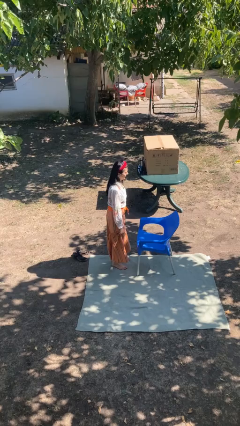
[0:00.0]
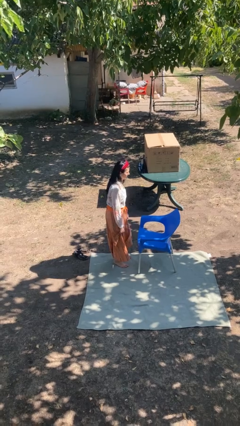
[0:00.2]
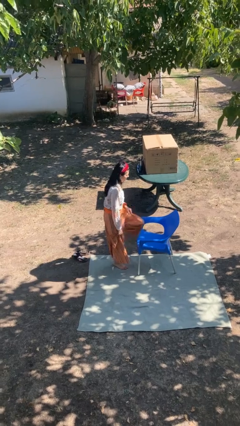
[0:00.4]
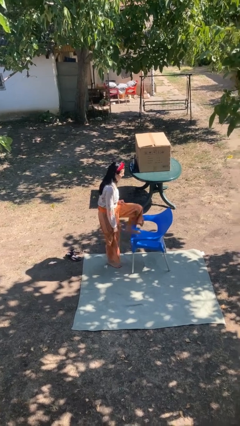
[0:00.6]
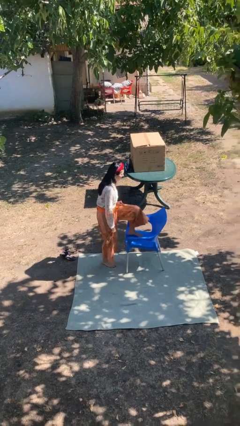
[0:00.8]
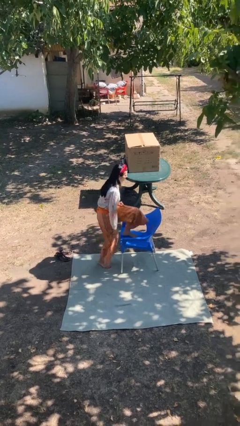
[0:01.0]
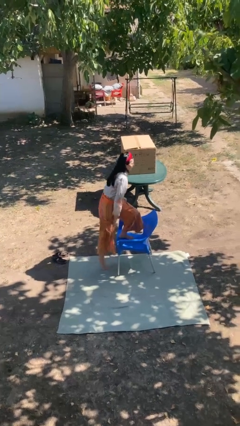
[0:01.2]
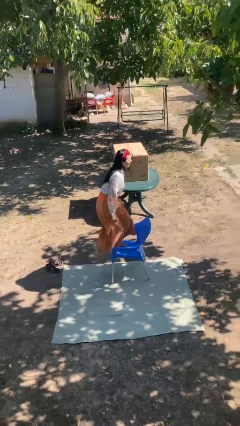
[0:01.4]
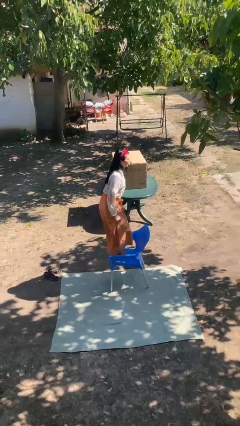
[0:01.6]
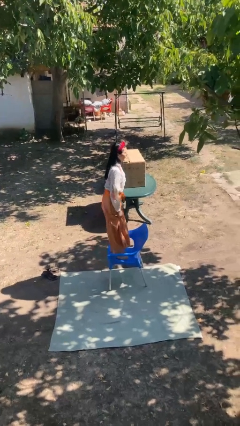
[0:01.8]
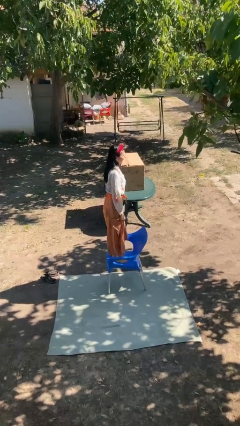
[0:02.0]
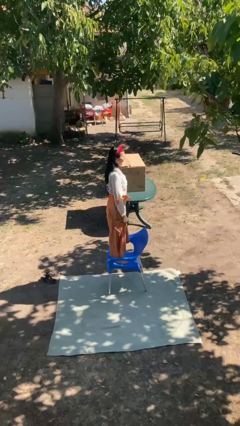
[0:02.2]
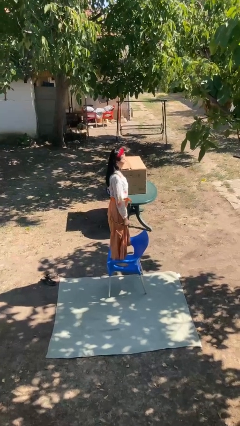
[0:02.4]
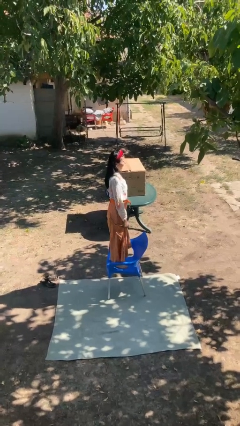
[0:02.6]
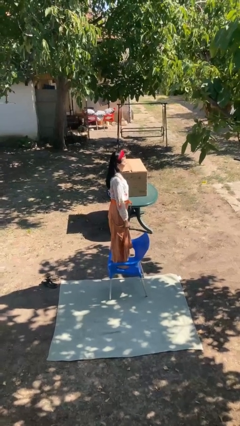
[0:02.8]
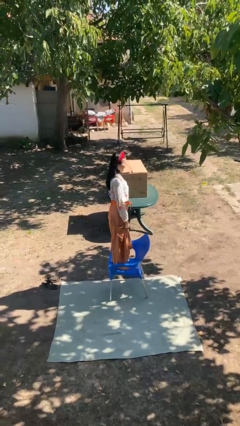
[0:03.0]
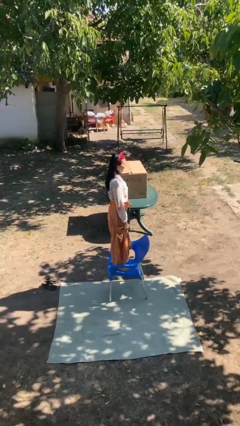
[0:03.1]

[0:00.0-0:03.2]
person climbs on chair

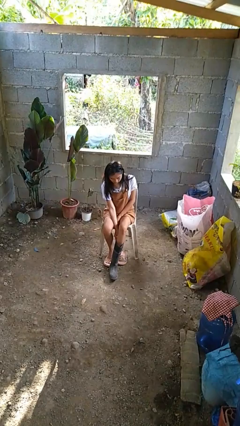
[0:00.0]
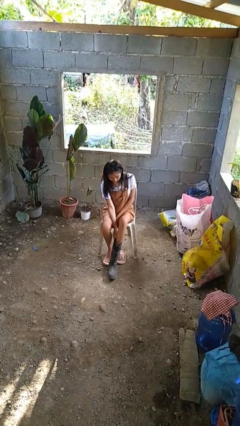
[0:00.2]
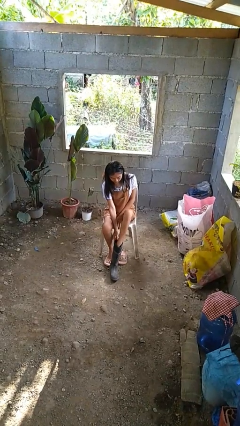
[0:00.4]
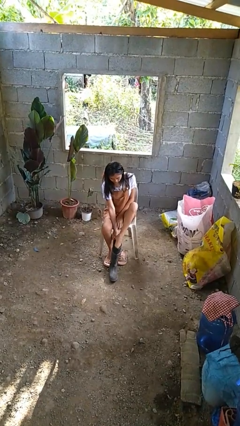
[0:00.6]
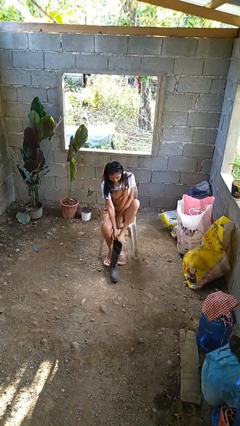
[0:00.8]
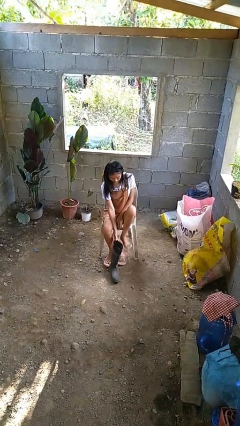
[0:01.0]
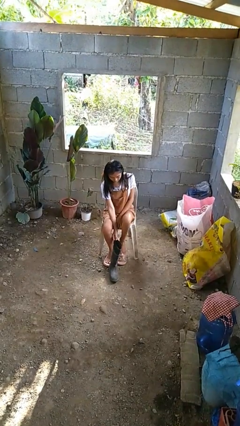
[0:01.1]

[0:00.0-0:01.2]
person takes off boots

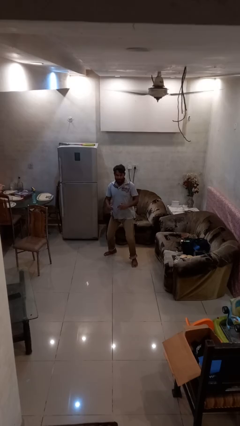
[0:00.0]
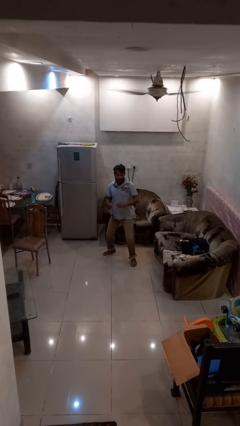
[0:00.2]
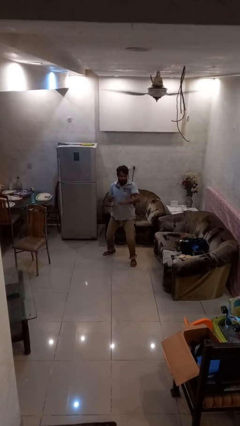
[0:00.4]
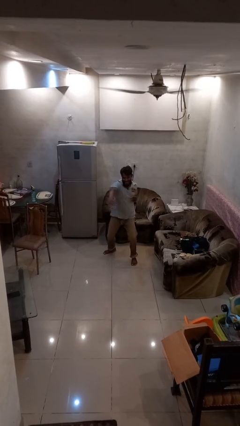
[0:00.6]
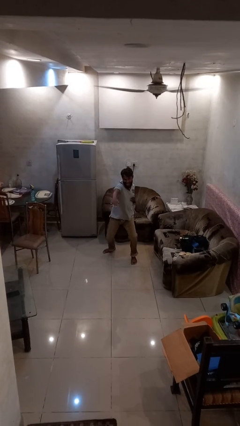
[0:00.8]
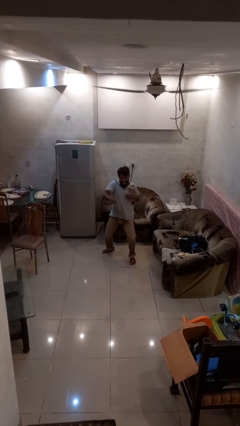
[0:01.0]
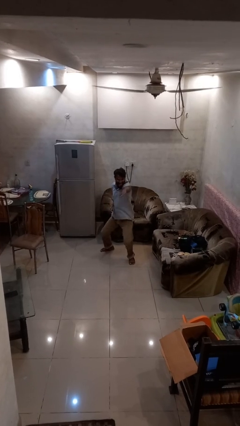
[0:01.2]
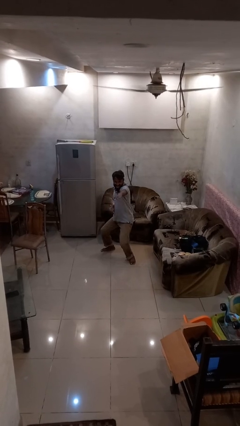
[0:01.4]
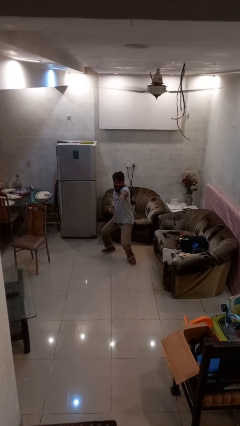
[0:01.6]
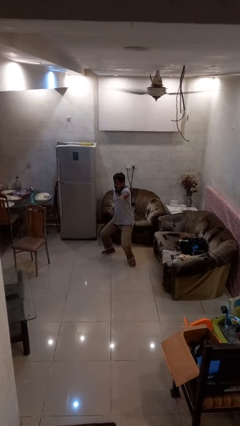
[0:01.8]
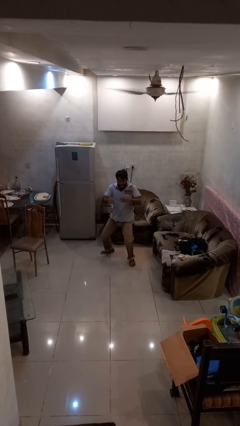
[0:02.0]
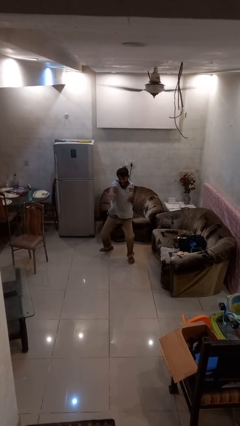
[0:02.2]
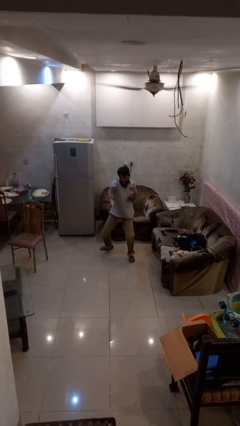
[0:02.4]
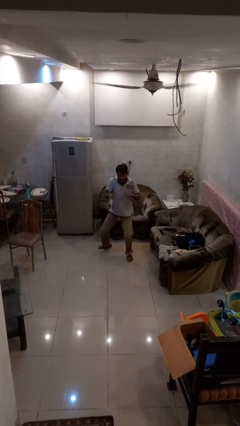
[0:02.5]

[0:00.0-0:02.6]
person karate chop

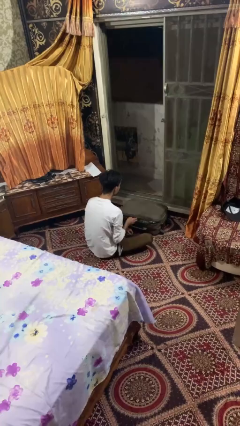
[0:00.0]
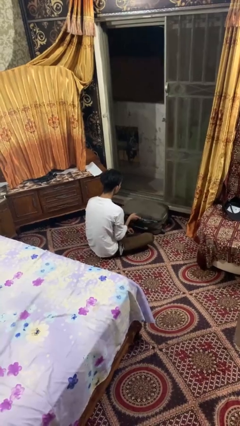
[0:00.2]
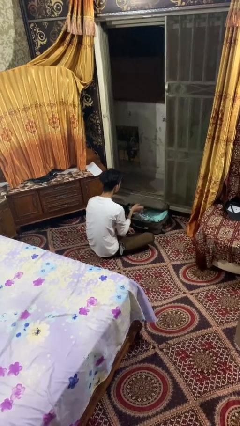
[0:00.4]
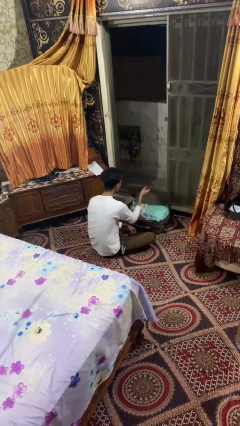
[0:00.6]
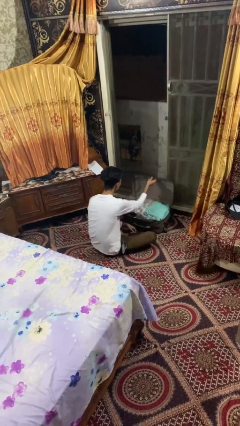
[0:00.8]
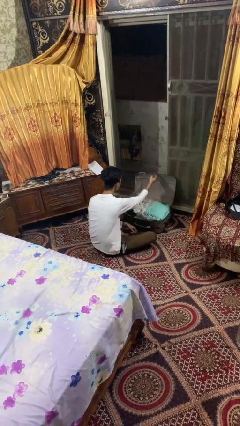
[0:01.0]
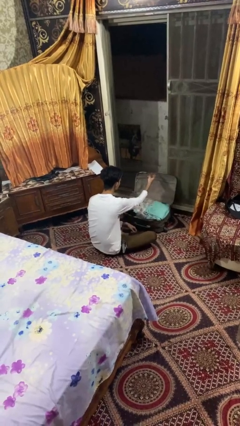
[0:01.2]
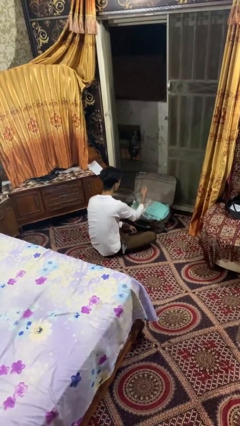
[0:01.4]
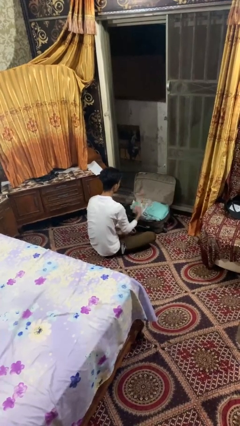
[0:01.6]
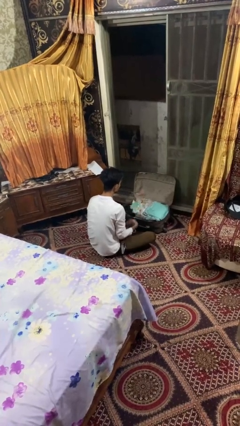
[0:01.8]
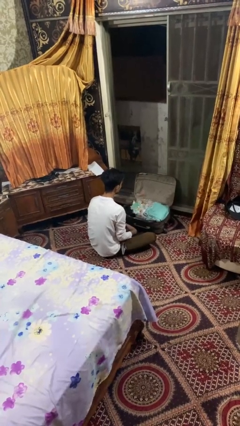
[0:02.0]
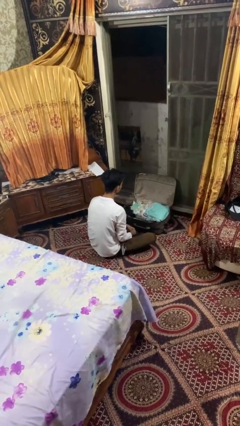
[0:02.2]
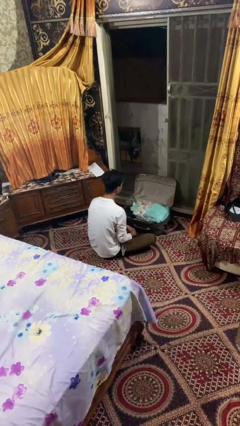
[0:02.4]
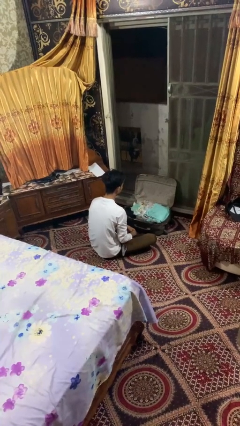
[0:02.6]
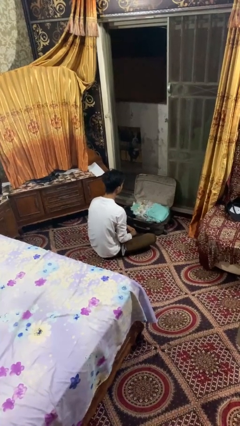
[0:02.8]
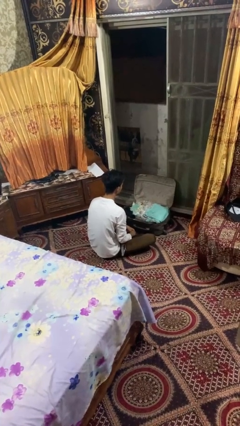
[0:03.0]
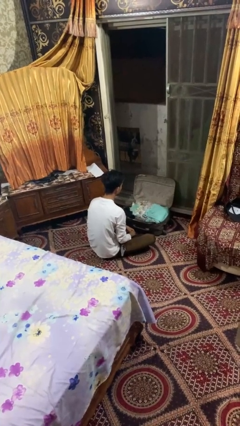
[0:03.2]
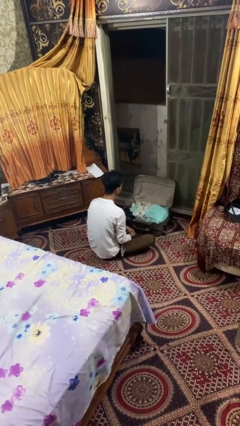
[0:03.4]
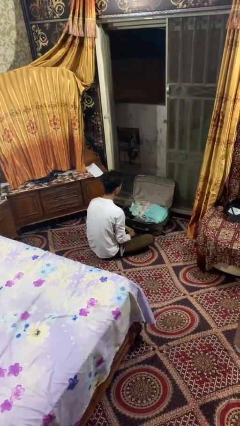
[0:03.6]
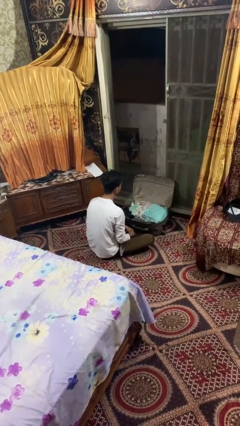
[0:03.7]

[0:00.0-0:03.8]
person opens suitcase

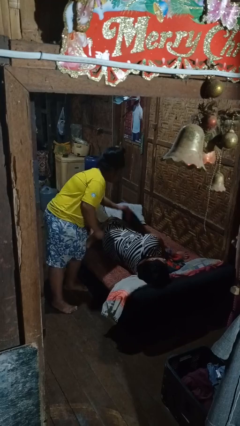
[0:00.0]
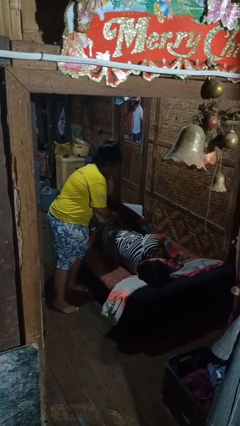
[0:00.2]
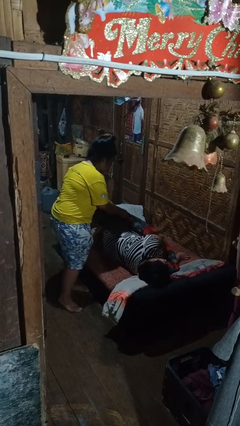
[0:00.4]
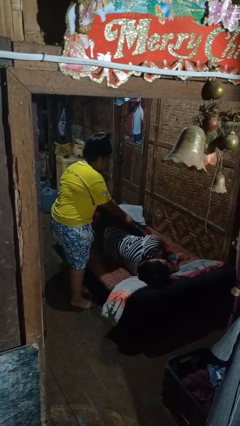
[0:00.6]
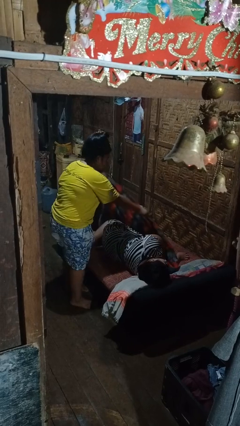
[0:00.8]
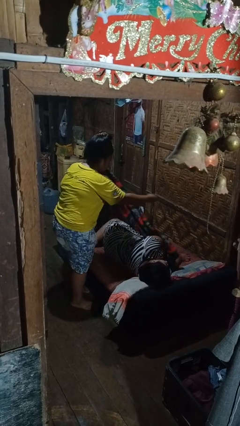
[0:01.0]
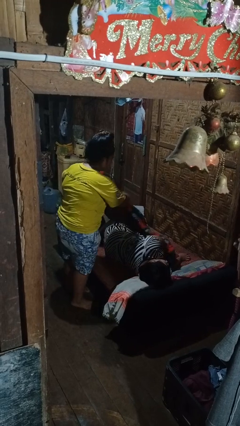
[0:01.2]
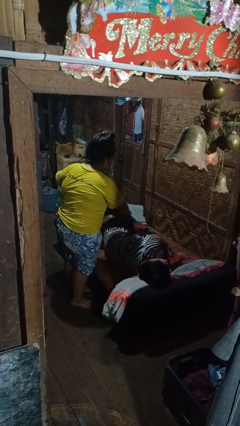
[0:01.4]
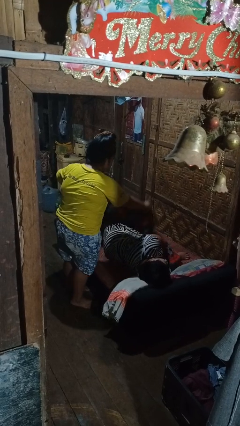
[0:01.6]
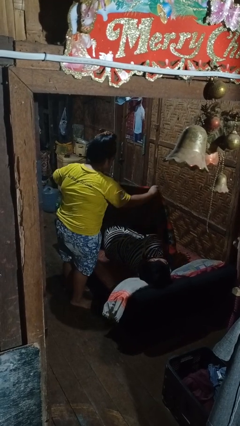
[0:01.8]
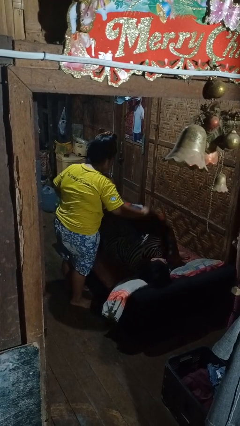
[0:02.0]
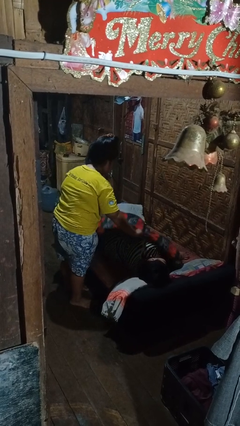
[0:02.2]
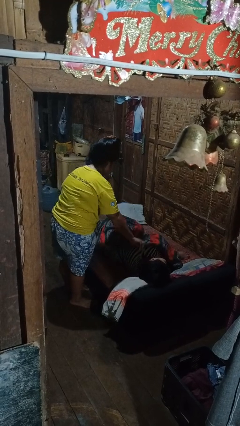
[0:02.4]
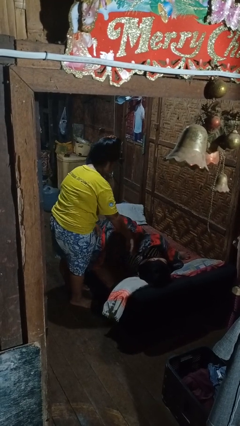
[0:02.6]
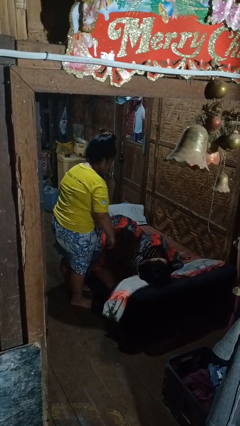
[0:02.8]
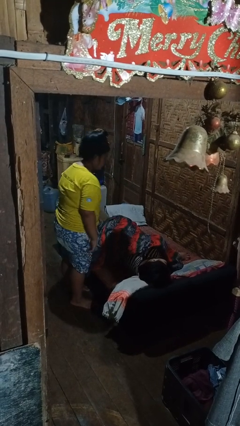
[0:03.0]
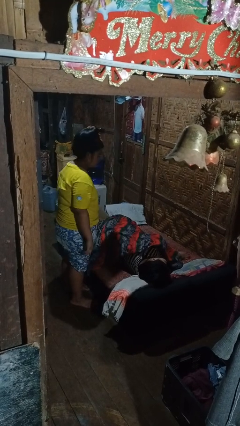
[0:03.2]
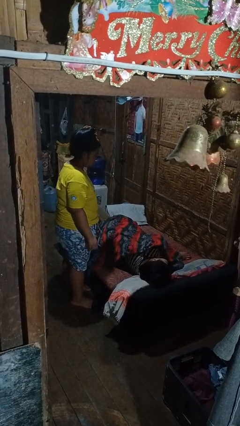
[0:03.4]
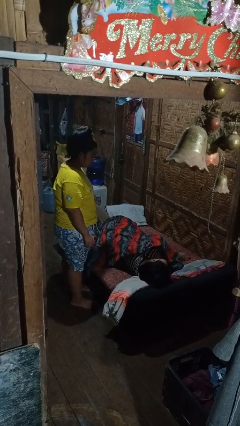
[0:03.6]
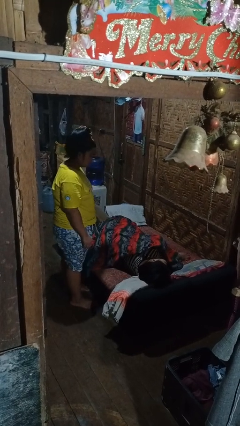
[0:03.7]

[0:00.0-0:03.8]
person covers friend with blanket

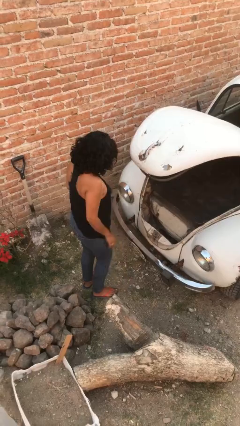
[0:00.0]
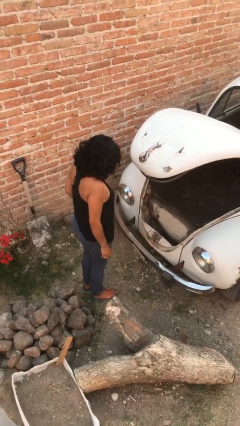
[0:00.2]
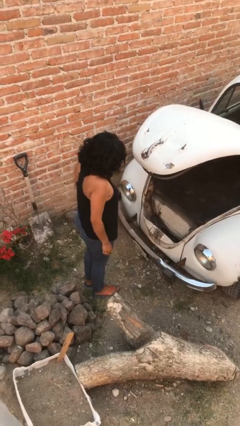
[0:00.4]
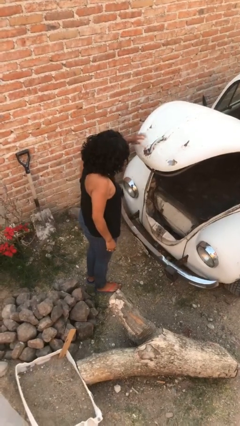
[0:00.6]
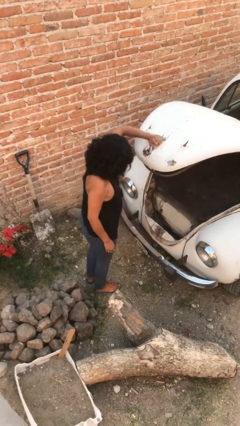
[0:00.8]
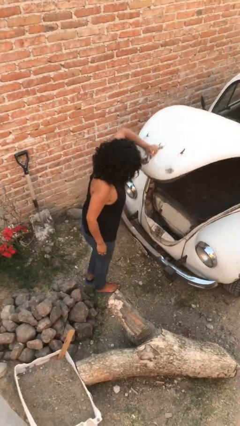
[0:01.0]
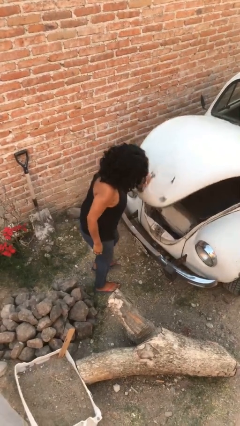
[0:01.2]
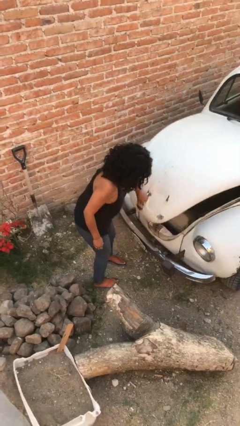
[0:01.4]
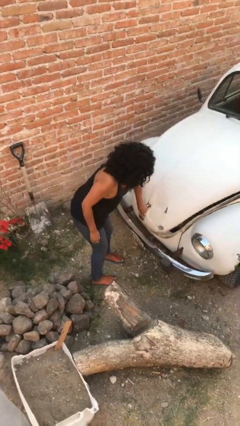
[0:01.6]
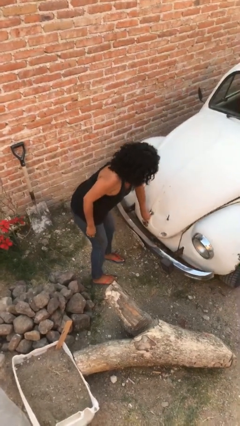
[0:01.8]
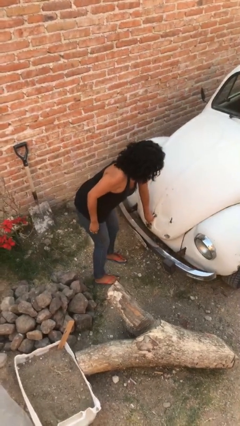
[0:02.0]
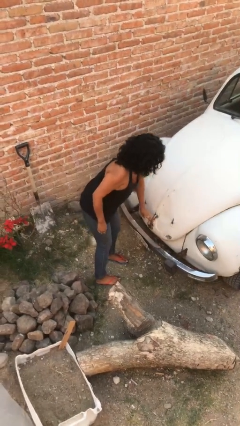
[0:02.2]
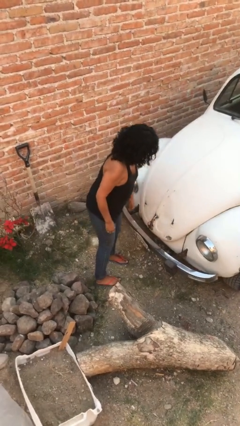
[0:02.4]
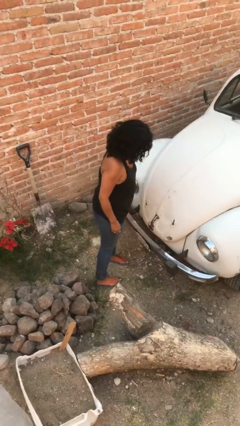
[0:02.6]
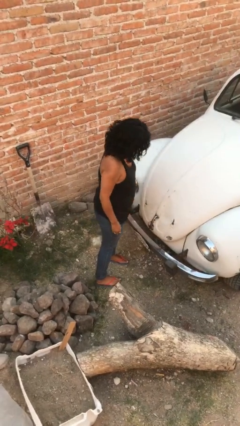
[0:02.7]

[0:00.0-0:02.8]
person closes car trunk
